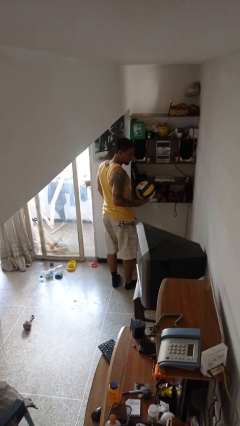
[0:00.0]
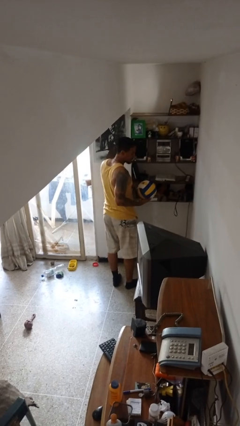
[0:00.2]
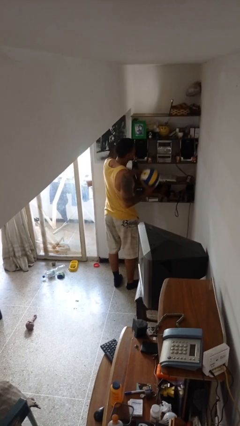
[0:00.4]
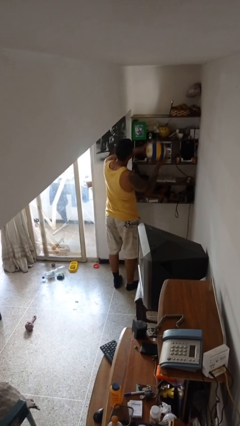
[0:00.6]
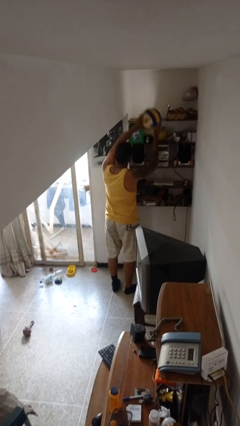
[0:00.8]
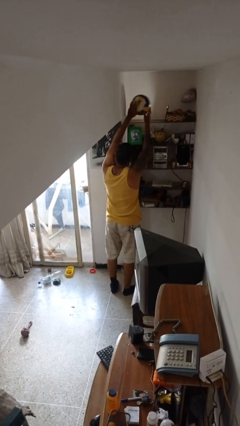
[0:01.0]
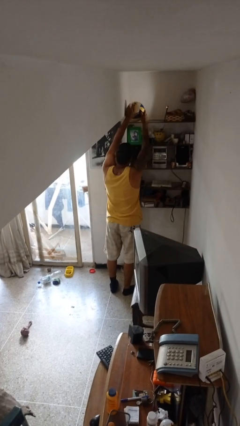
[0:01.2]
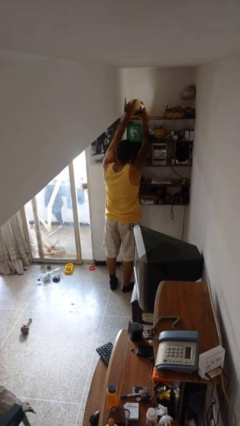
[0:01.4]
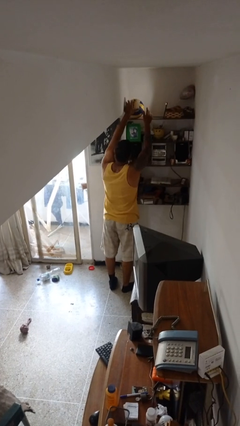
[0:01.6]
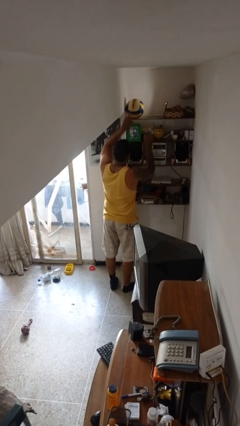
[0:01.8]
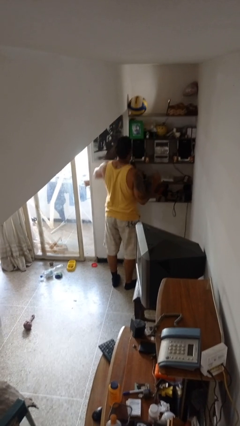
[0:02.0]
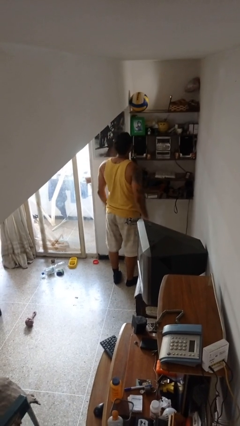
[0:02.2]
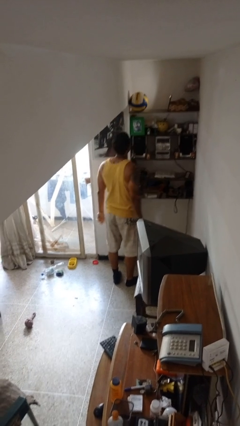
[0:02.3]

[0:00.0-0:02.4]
person puts down object on shelf

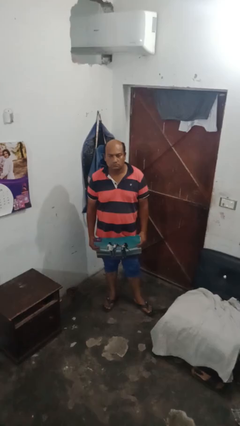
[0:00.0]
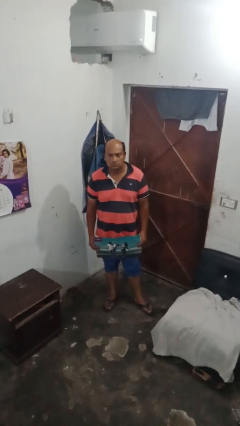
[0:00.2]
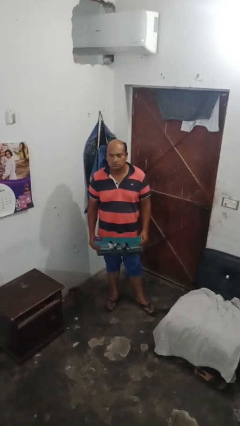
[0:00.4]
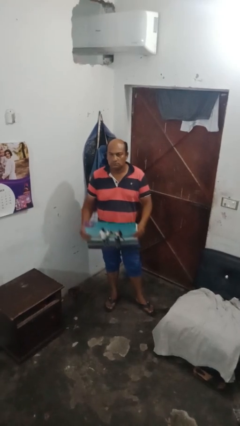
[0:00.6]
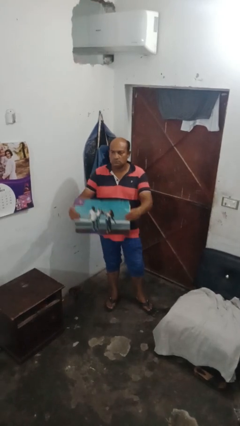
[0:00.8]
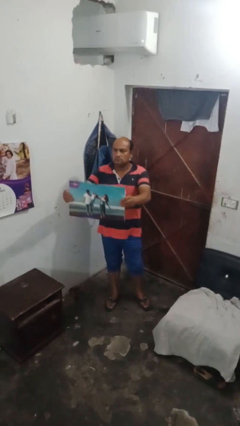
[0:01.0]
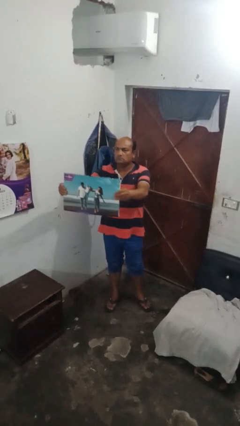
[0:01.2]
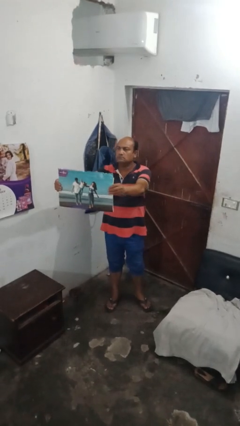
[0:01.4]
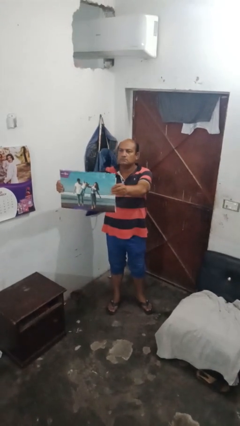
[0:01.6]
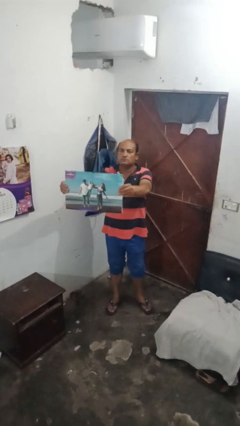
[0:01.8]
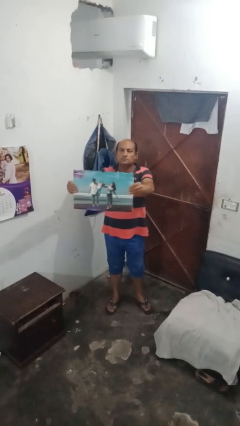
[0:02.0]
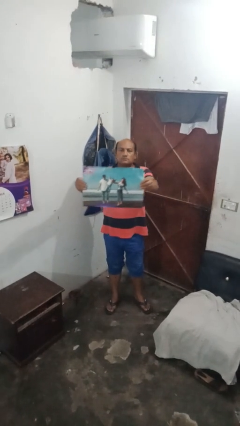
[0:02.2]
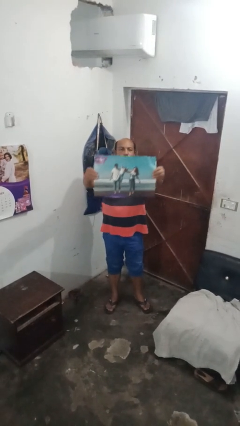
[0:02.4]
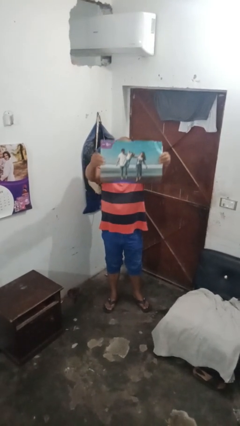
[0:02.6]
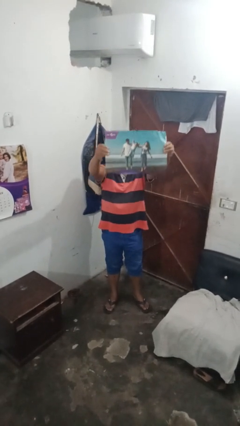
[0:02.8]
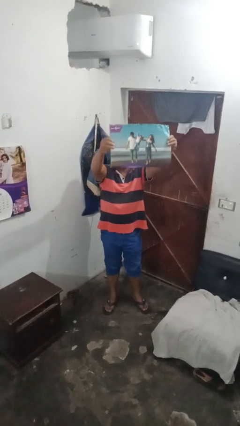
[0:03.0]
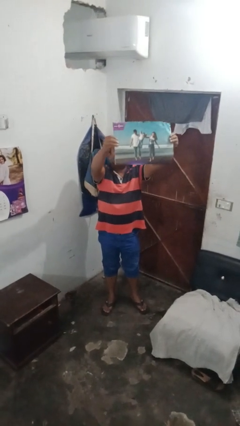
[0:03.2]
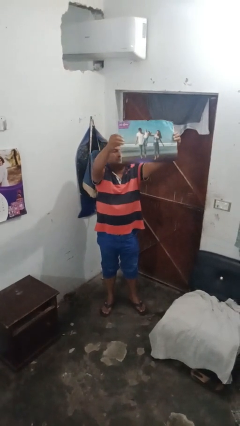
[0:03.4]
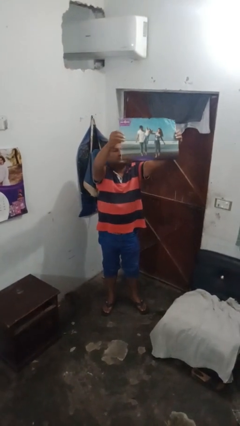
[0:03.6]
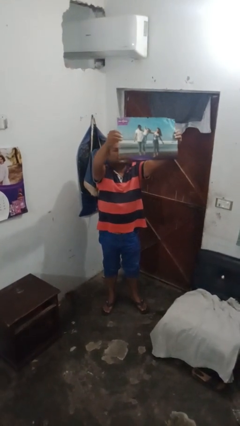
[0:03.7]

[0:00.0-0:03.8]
person holds object above head

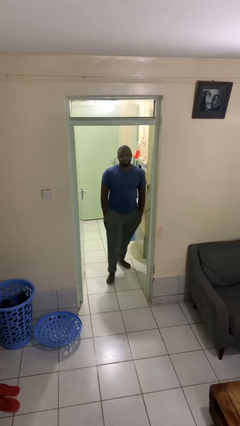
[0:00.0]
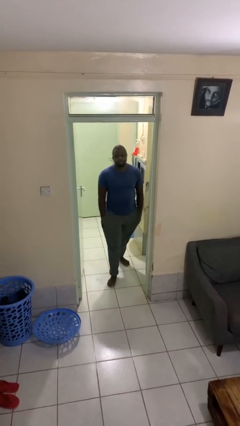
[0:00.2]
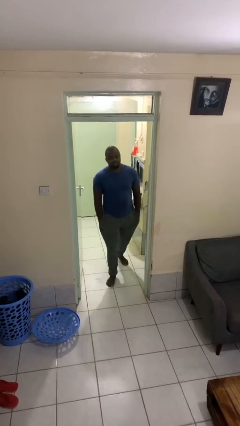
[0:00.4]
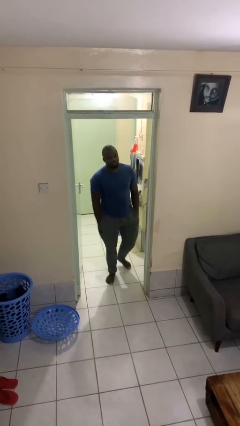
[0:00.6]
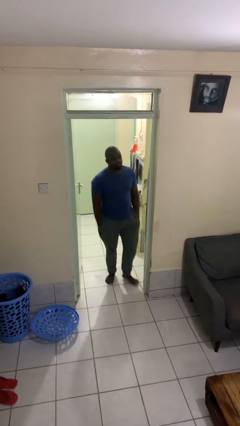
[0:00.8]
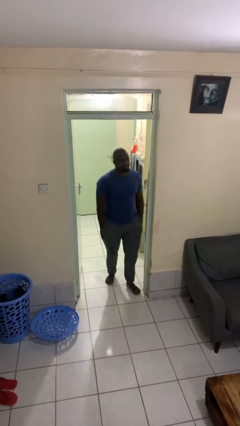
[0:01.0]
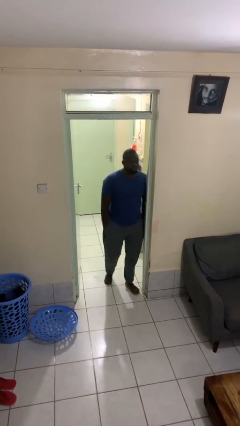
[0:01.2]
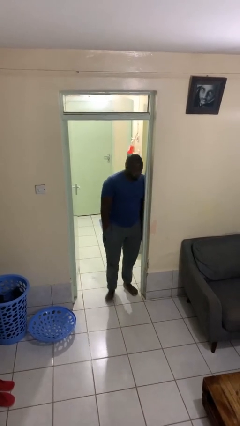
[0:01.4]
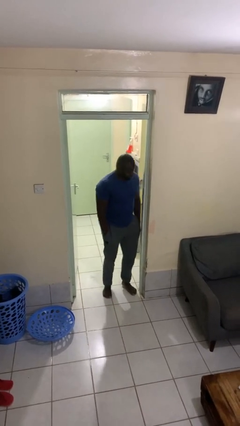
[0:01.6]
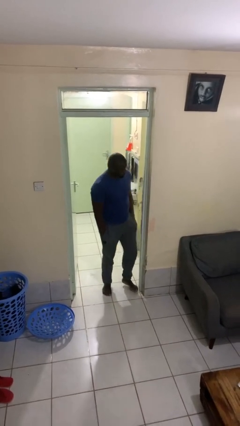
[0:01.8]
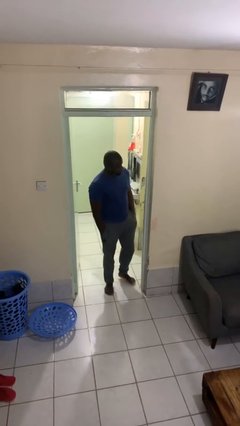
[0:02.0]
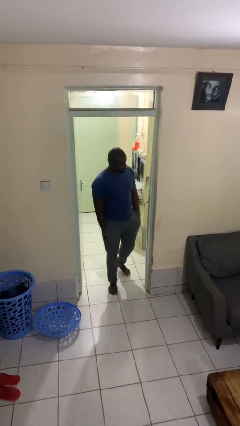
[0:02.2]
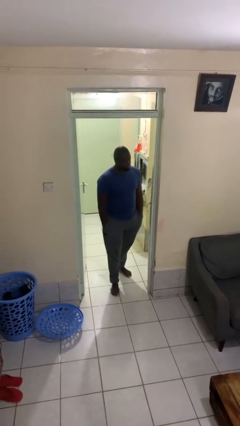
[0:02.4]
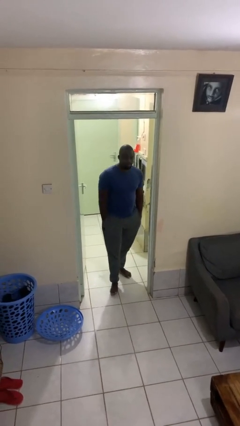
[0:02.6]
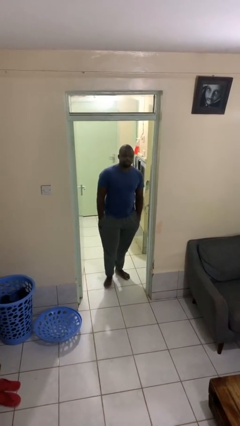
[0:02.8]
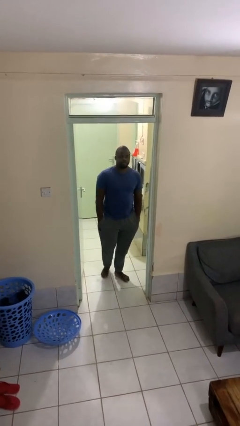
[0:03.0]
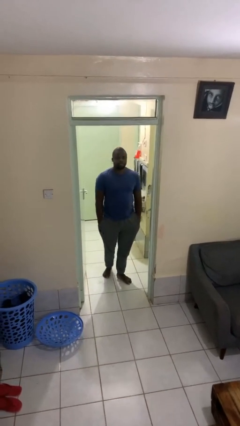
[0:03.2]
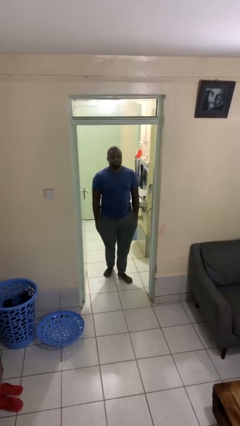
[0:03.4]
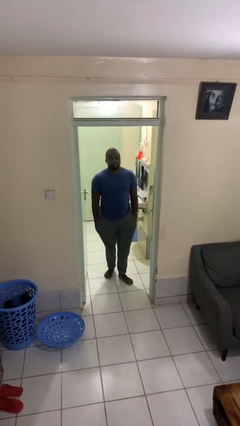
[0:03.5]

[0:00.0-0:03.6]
person bumps into wall

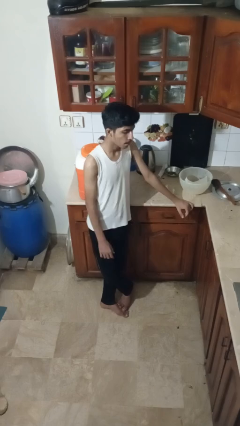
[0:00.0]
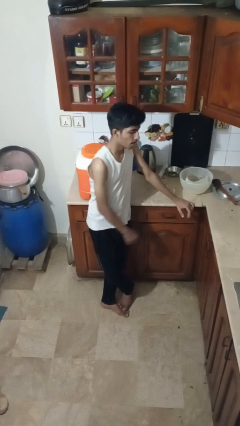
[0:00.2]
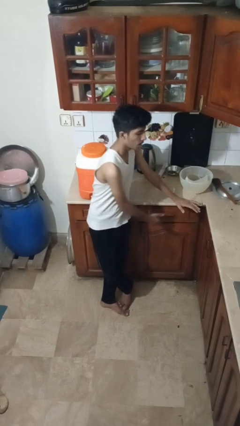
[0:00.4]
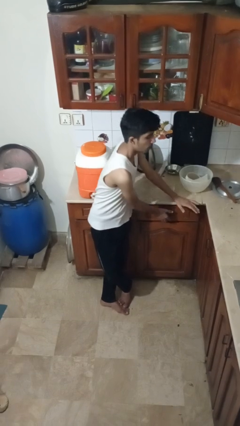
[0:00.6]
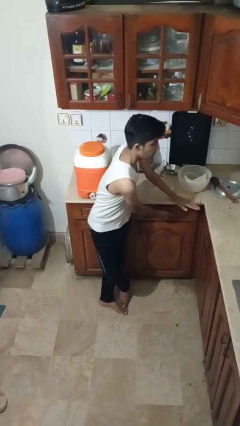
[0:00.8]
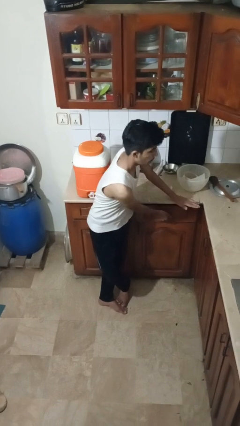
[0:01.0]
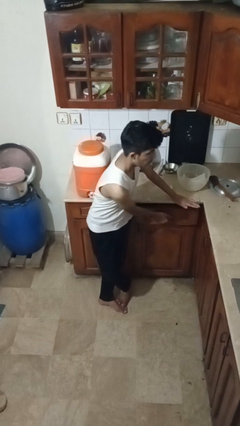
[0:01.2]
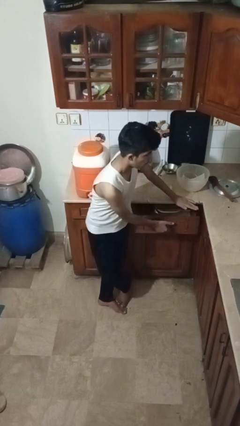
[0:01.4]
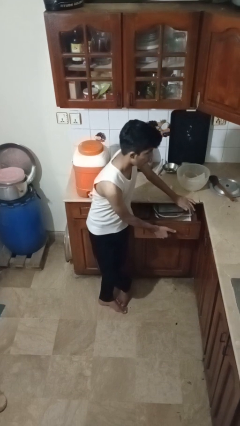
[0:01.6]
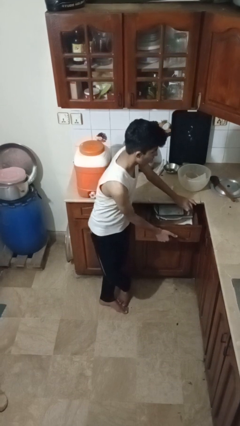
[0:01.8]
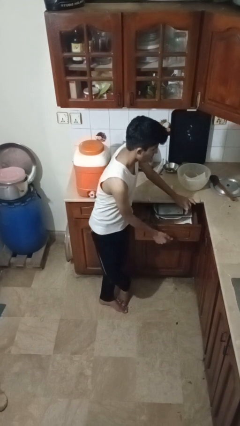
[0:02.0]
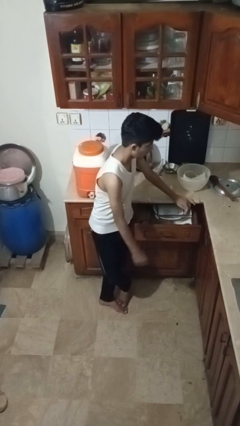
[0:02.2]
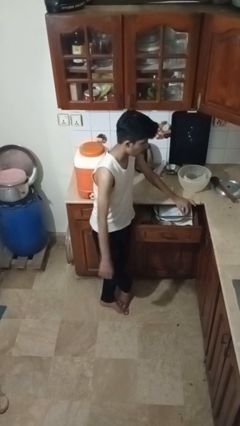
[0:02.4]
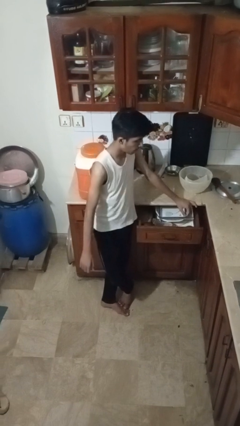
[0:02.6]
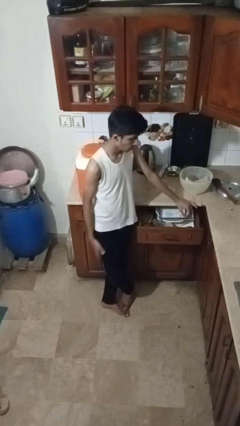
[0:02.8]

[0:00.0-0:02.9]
person opens kitchen drawer

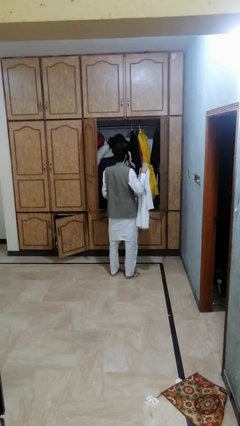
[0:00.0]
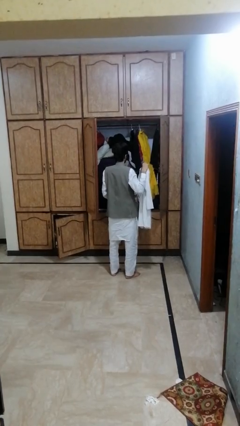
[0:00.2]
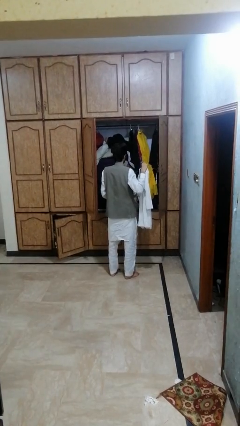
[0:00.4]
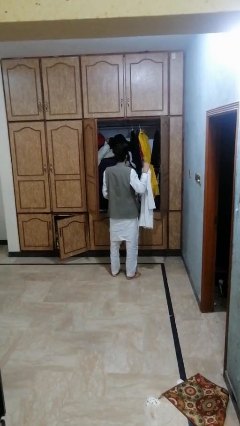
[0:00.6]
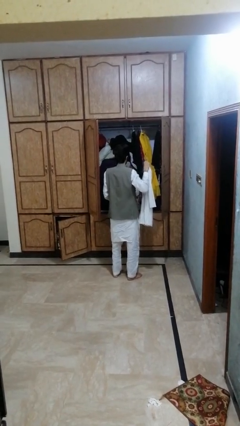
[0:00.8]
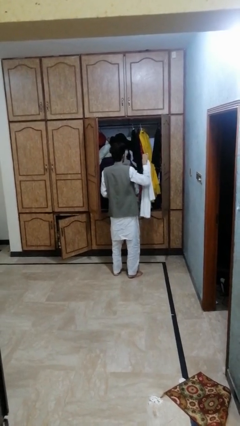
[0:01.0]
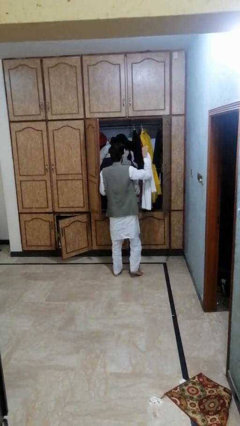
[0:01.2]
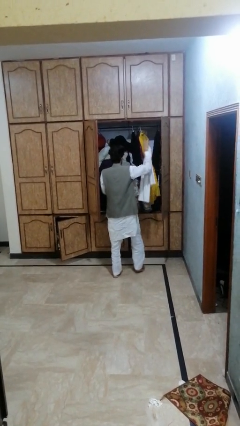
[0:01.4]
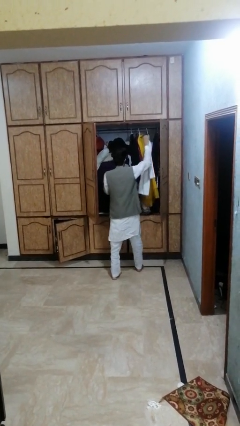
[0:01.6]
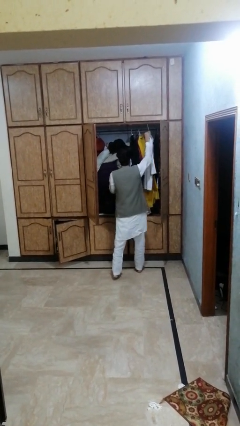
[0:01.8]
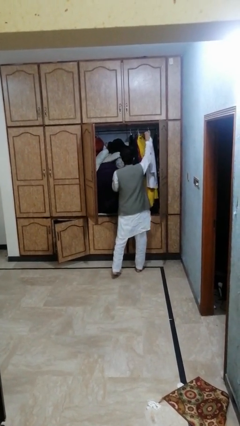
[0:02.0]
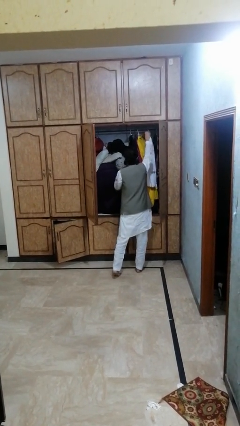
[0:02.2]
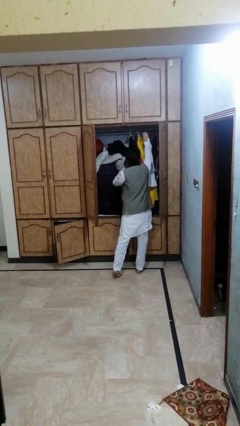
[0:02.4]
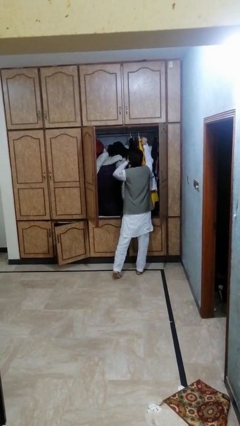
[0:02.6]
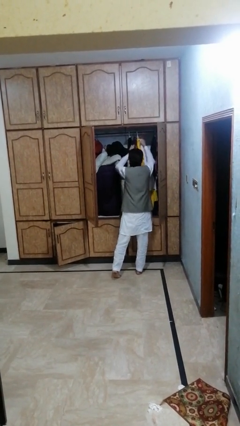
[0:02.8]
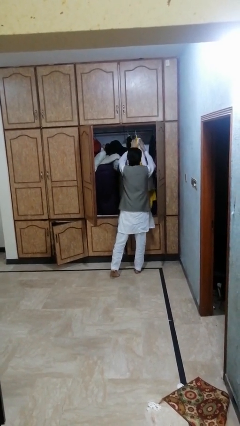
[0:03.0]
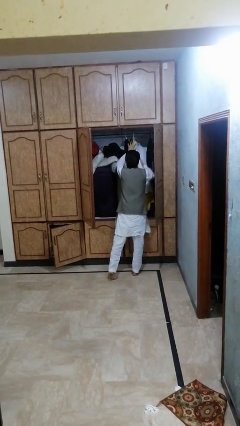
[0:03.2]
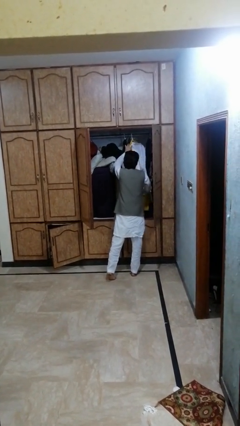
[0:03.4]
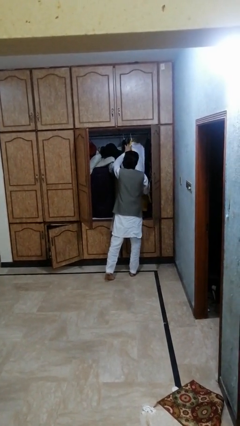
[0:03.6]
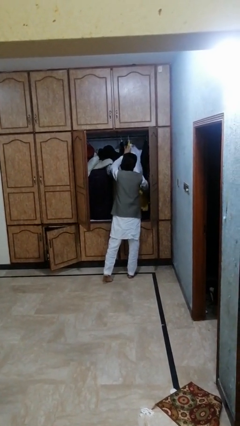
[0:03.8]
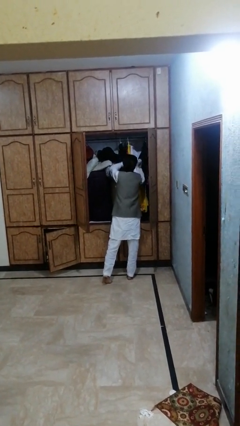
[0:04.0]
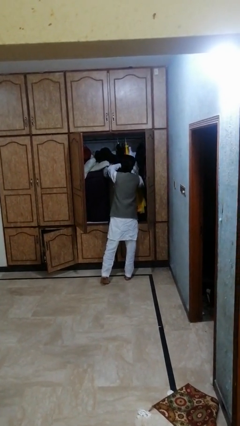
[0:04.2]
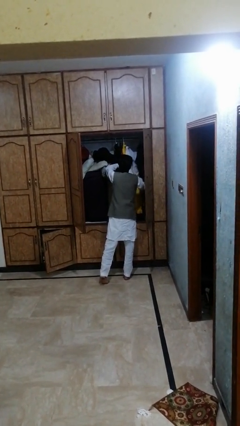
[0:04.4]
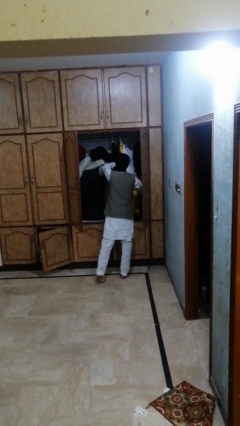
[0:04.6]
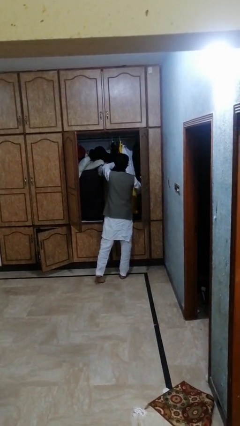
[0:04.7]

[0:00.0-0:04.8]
person puts clothes into dresser

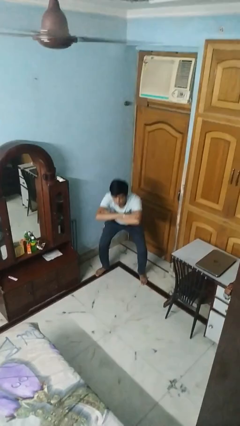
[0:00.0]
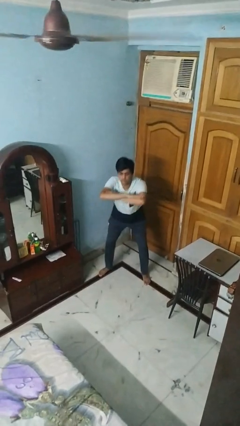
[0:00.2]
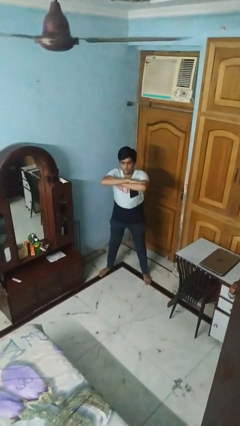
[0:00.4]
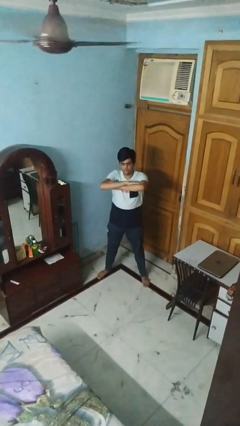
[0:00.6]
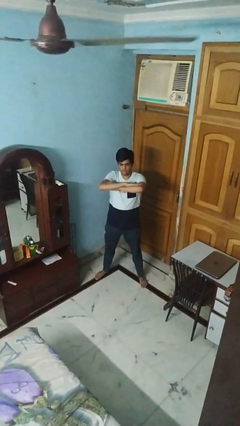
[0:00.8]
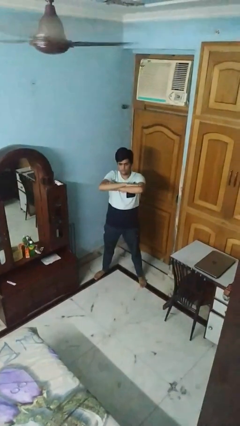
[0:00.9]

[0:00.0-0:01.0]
person stands up
